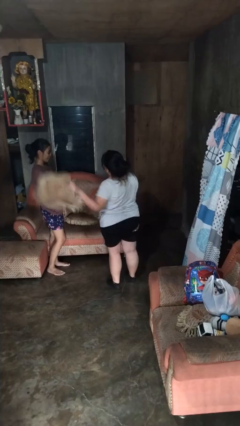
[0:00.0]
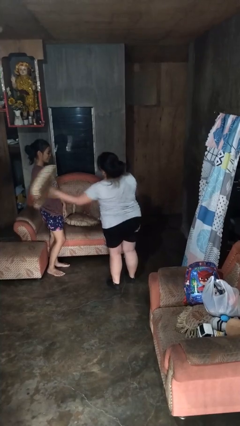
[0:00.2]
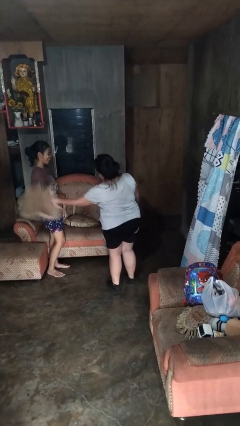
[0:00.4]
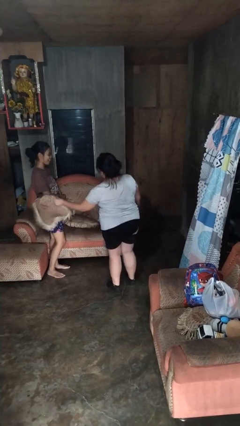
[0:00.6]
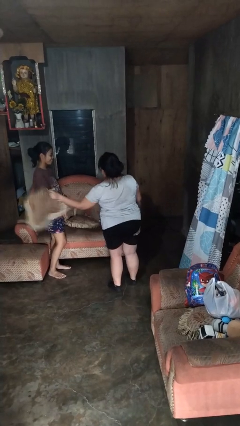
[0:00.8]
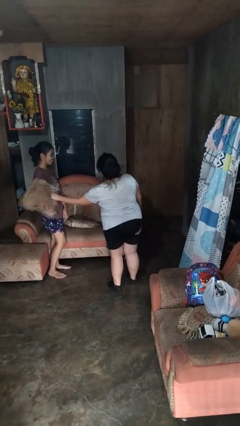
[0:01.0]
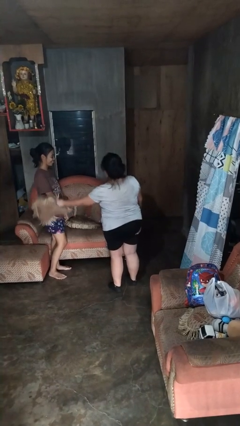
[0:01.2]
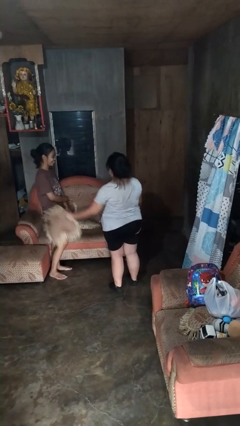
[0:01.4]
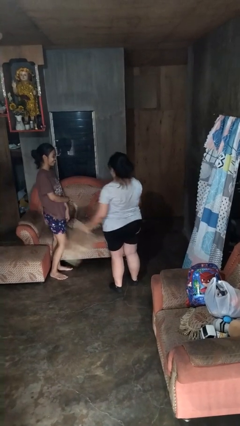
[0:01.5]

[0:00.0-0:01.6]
person hits person with pillow

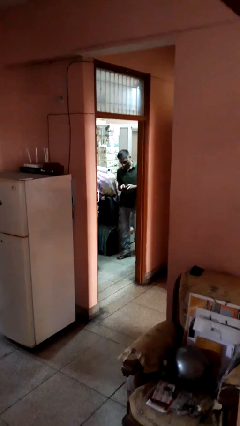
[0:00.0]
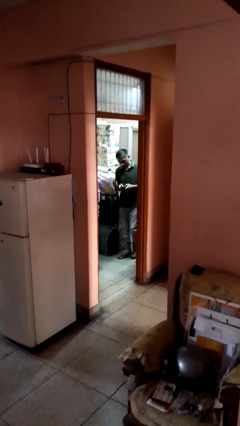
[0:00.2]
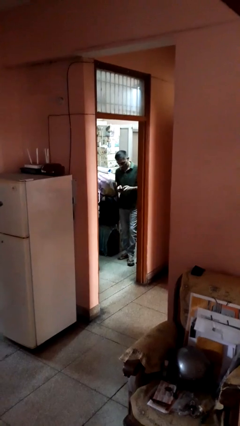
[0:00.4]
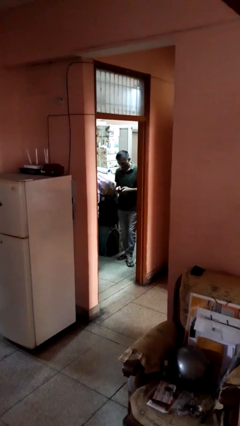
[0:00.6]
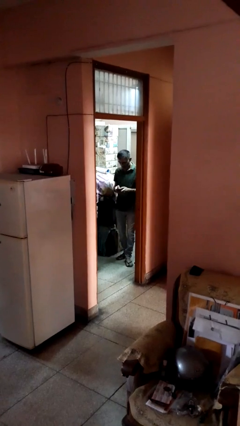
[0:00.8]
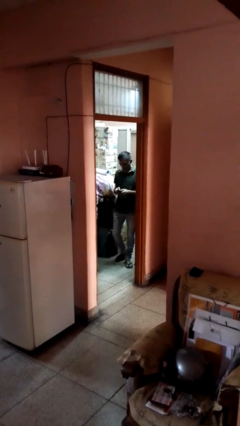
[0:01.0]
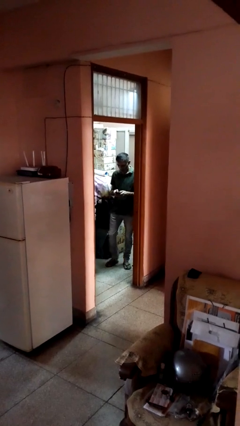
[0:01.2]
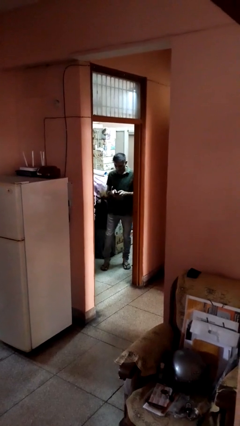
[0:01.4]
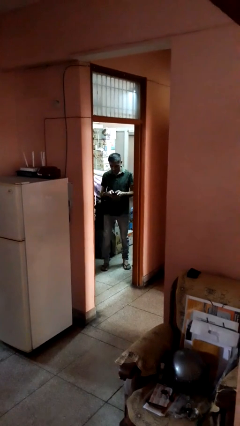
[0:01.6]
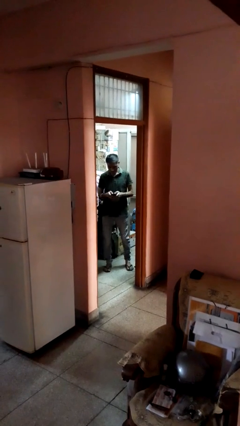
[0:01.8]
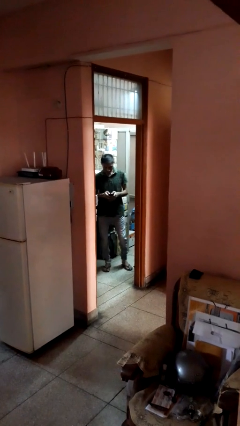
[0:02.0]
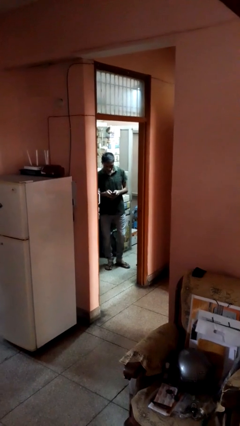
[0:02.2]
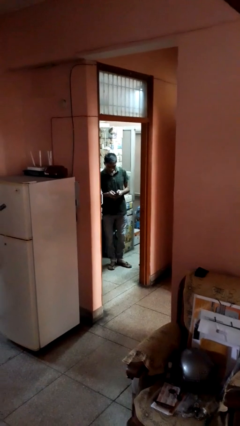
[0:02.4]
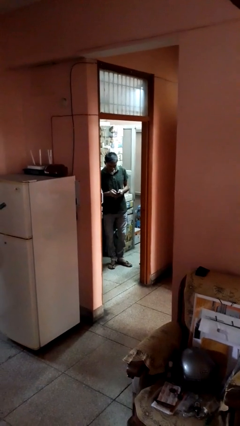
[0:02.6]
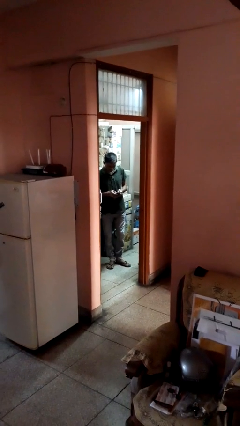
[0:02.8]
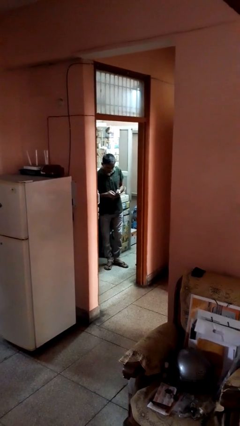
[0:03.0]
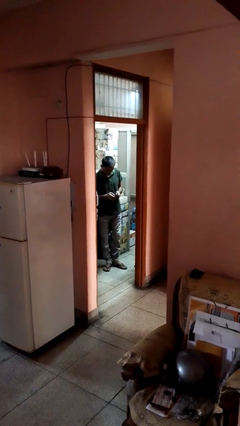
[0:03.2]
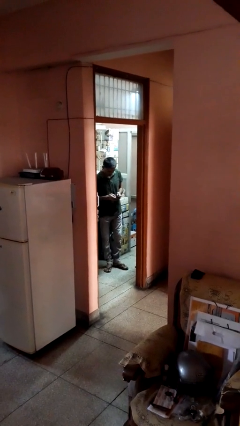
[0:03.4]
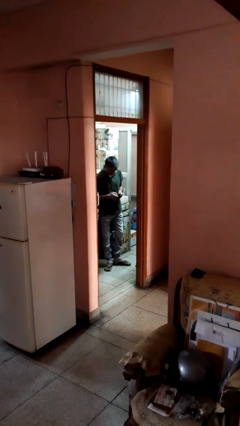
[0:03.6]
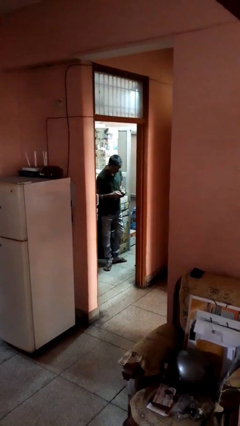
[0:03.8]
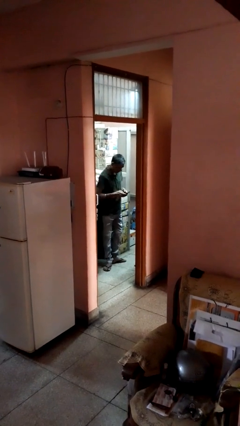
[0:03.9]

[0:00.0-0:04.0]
person enters scene through structure

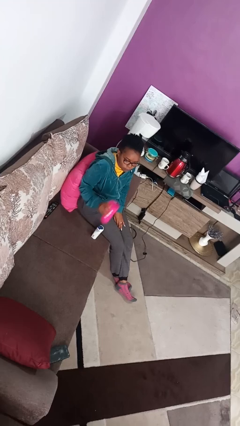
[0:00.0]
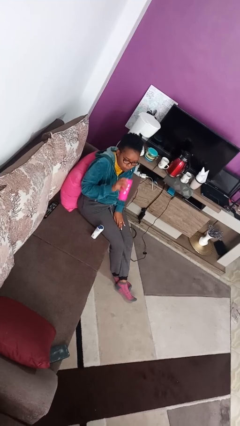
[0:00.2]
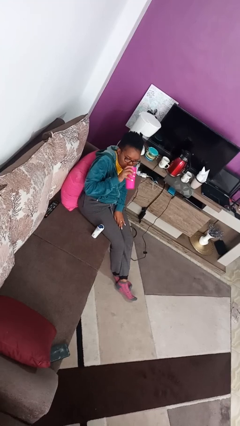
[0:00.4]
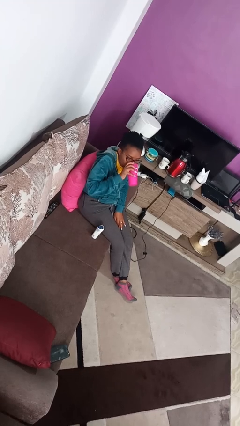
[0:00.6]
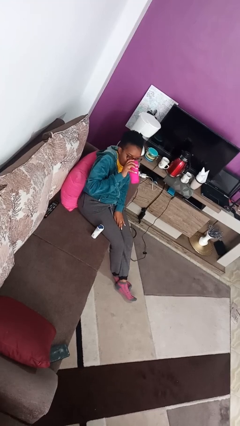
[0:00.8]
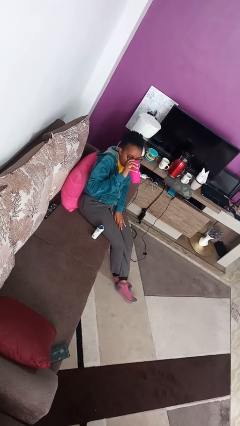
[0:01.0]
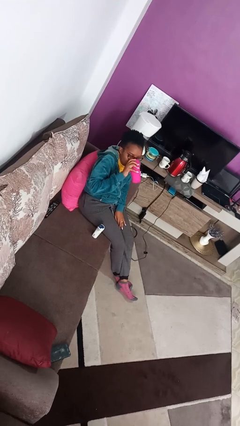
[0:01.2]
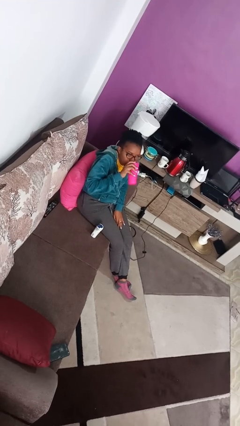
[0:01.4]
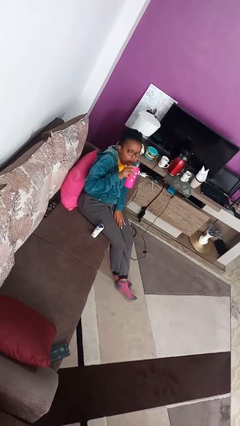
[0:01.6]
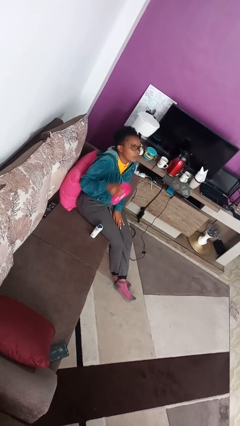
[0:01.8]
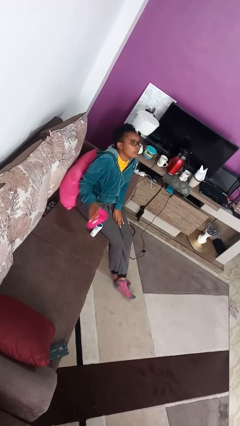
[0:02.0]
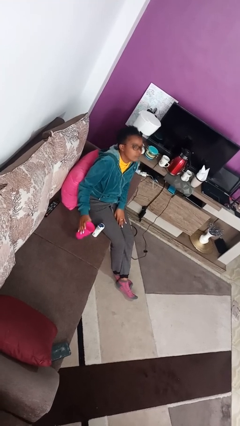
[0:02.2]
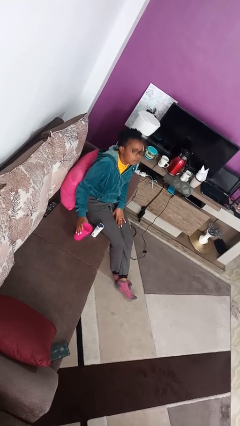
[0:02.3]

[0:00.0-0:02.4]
person drinks from cup

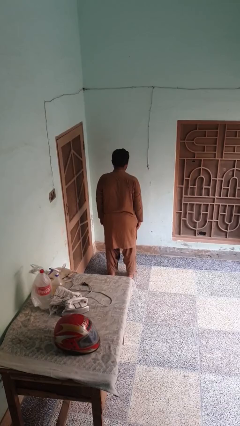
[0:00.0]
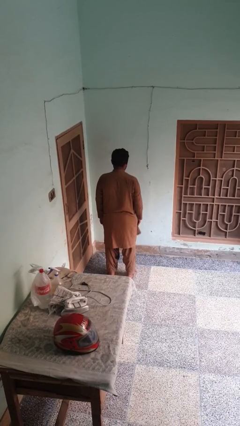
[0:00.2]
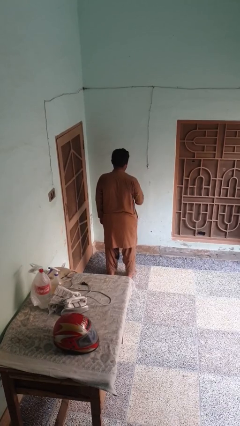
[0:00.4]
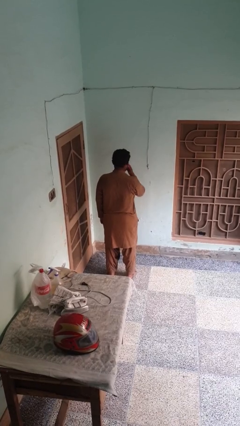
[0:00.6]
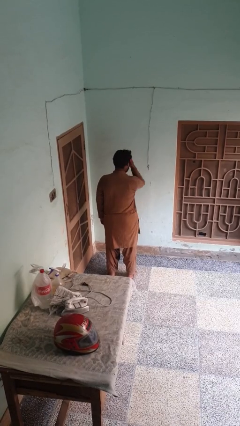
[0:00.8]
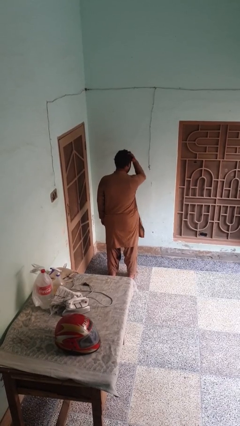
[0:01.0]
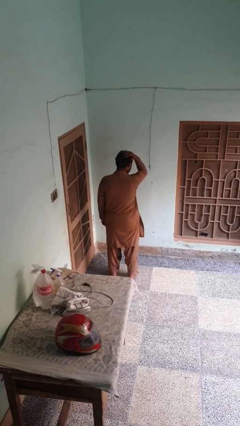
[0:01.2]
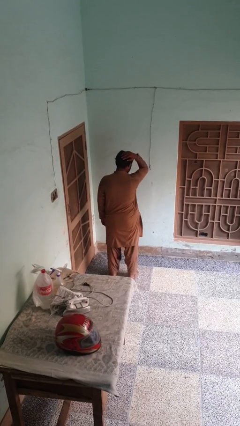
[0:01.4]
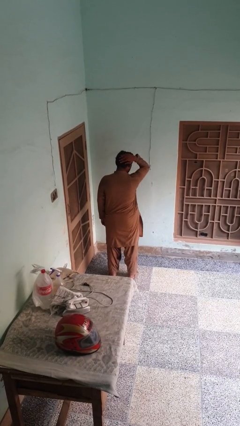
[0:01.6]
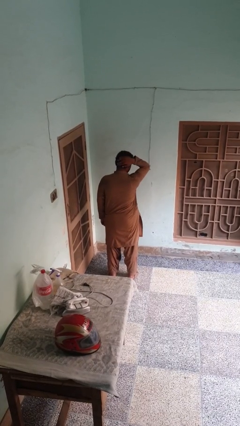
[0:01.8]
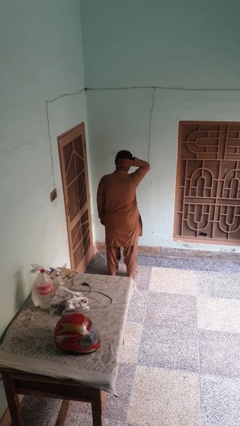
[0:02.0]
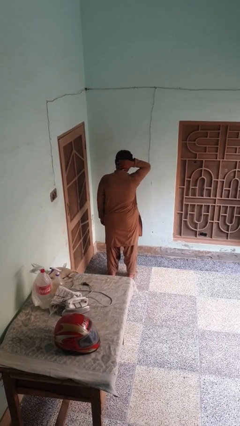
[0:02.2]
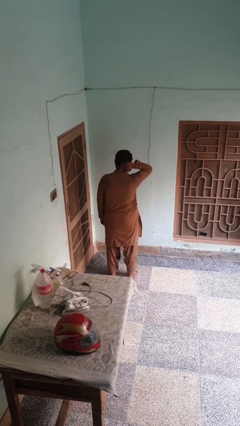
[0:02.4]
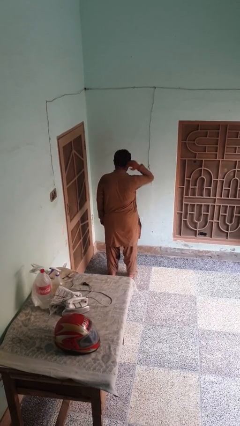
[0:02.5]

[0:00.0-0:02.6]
person strokes hair

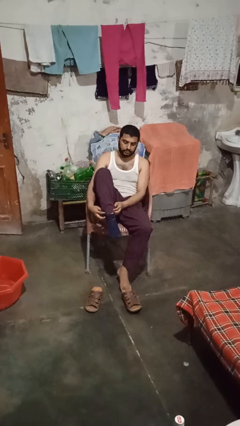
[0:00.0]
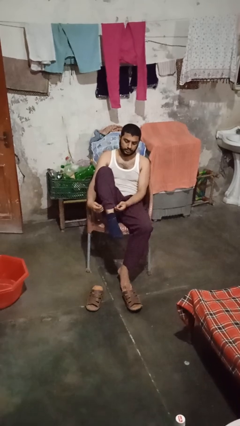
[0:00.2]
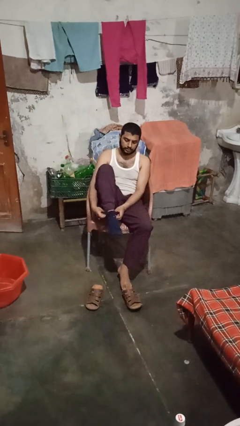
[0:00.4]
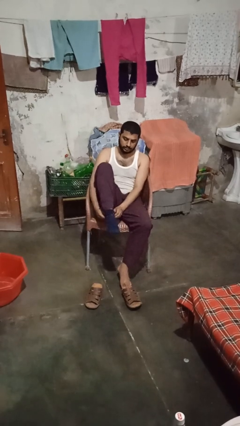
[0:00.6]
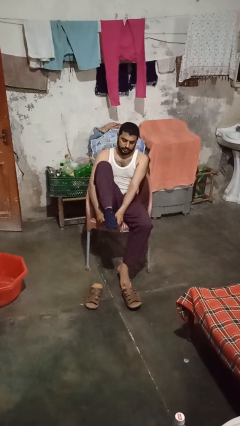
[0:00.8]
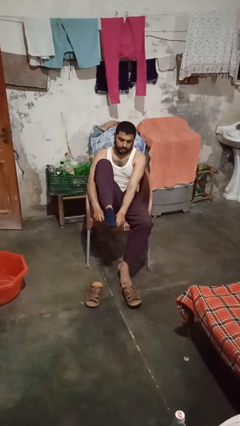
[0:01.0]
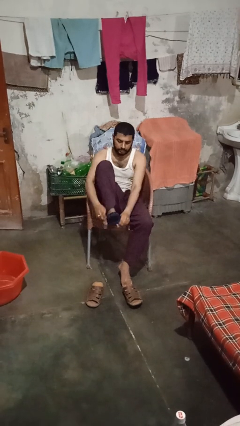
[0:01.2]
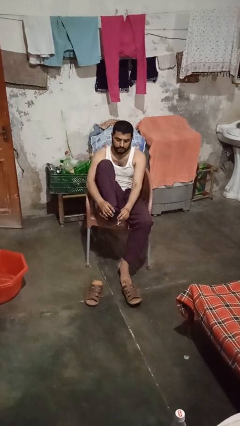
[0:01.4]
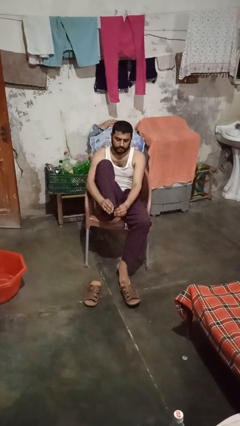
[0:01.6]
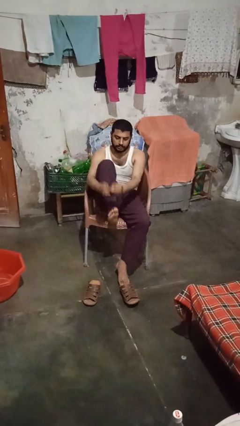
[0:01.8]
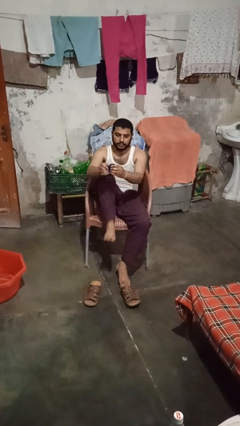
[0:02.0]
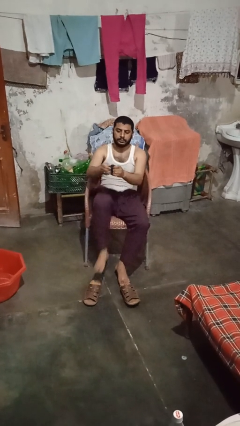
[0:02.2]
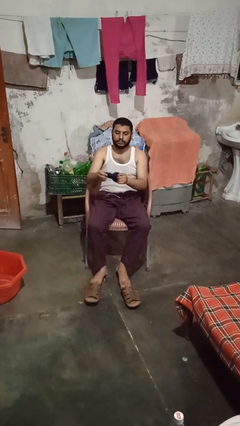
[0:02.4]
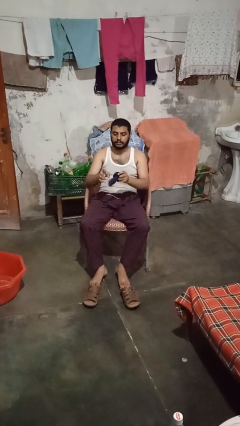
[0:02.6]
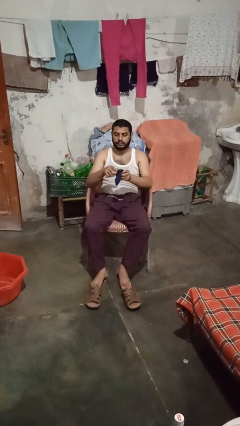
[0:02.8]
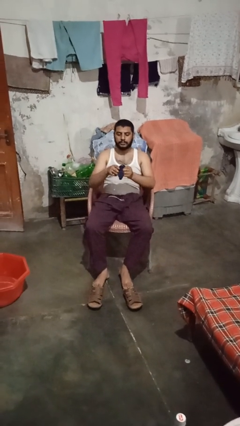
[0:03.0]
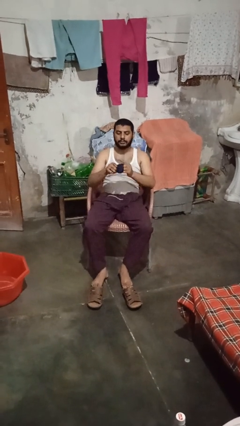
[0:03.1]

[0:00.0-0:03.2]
person takes off socks

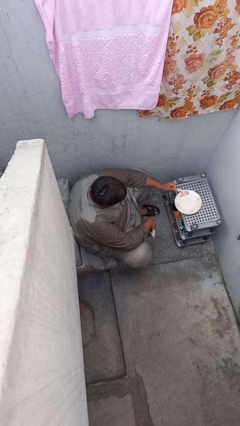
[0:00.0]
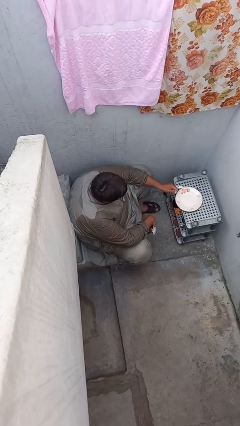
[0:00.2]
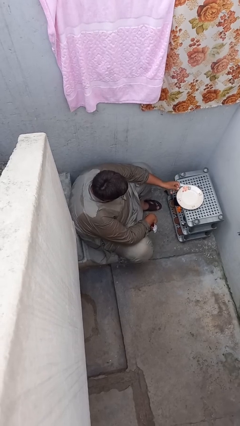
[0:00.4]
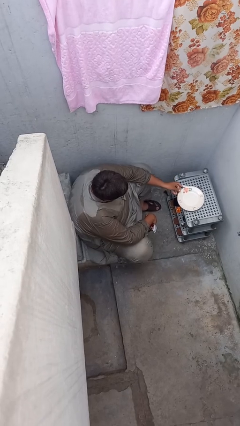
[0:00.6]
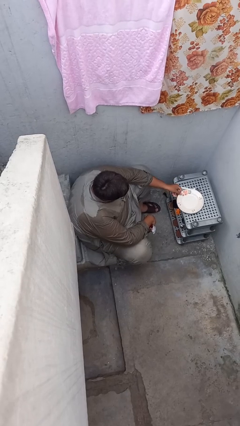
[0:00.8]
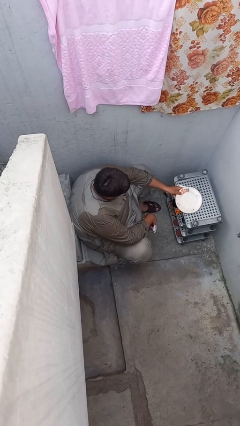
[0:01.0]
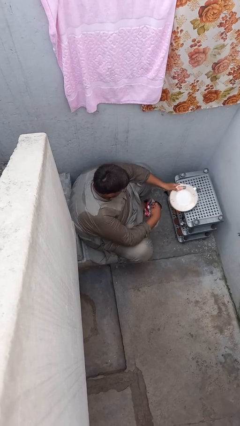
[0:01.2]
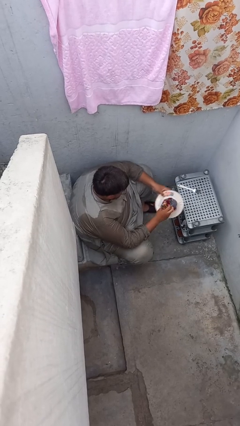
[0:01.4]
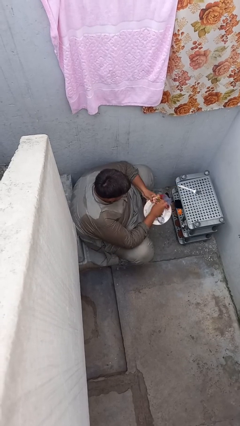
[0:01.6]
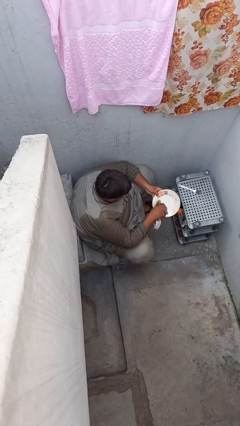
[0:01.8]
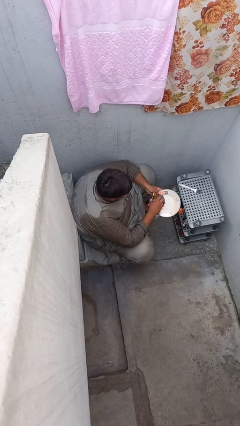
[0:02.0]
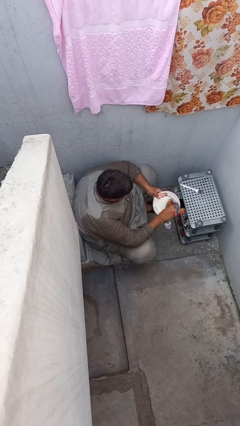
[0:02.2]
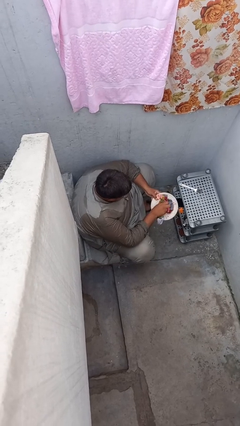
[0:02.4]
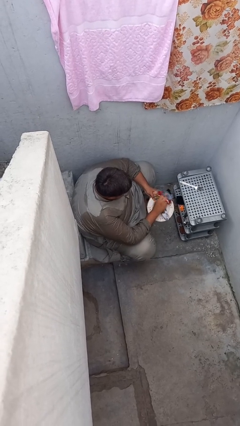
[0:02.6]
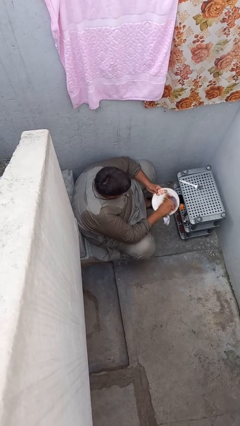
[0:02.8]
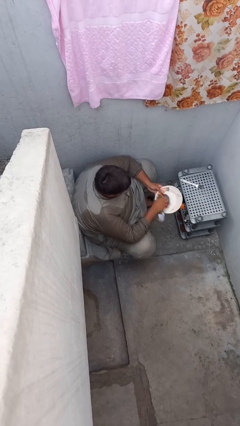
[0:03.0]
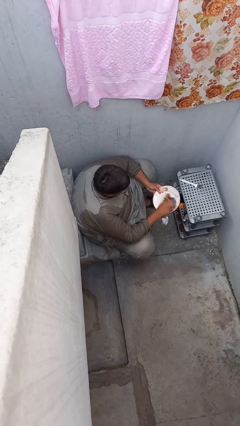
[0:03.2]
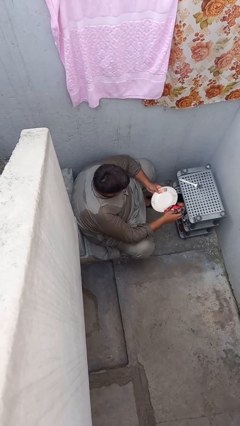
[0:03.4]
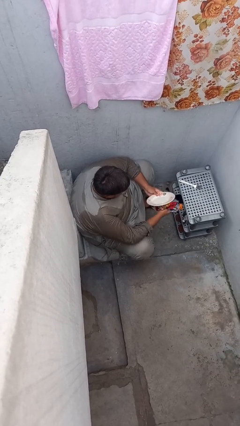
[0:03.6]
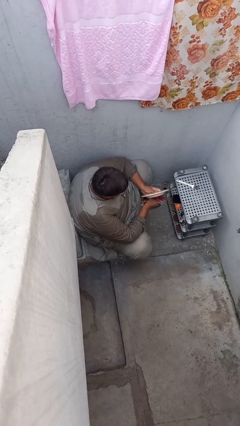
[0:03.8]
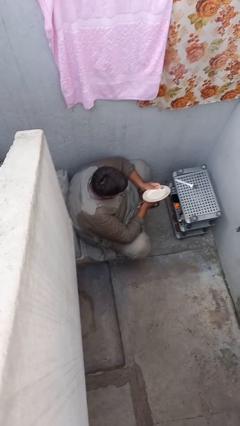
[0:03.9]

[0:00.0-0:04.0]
person dries dish
